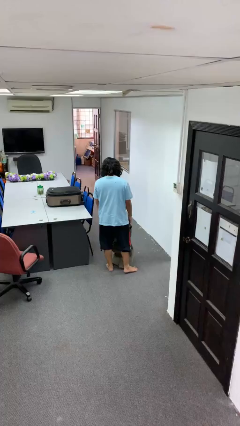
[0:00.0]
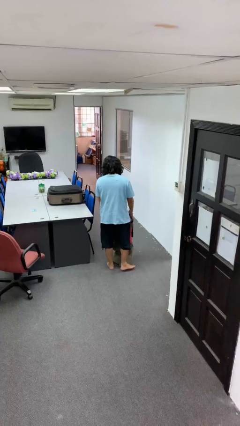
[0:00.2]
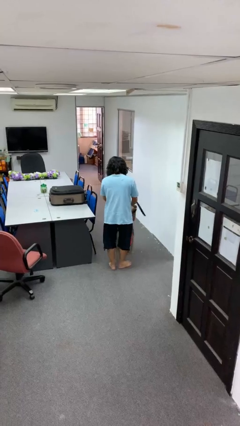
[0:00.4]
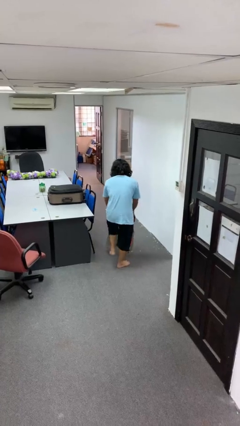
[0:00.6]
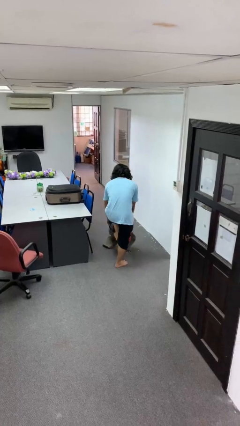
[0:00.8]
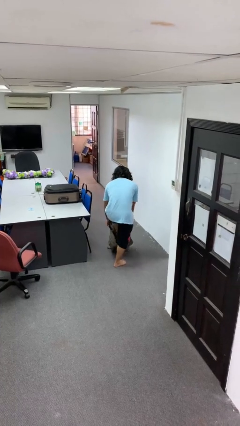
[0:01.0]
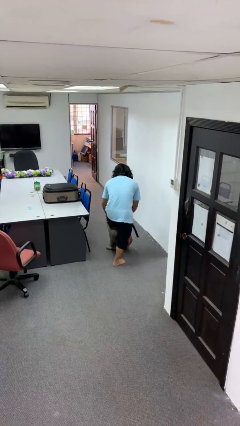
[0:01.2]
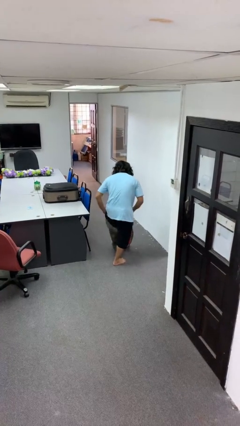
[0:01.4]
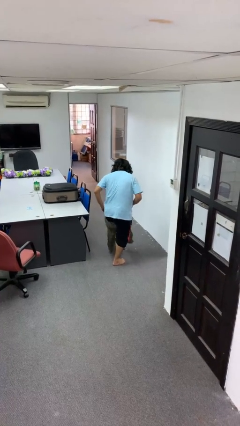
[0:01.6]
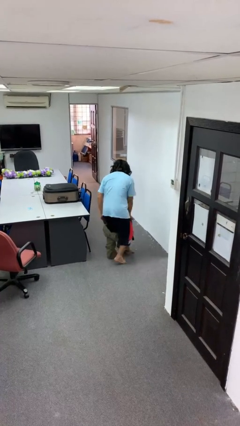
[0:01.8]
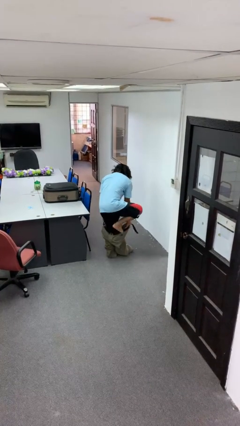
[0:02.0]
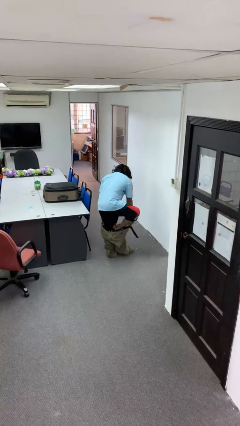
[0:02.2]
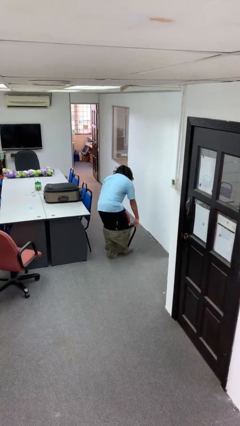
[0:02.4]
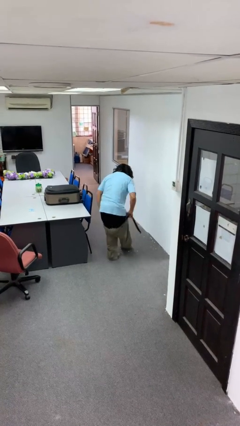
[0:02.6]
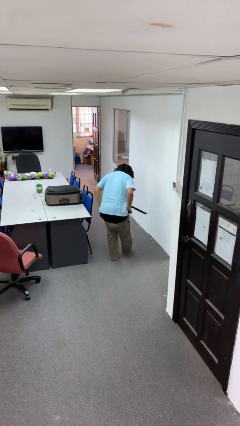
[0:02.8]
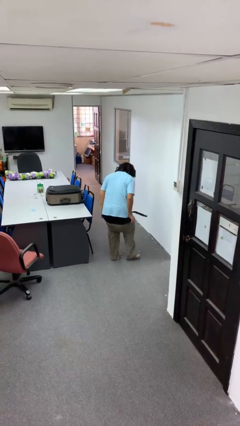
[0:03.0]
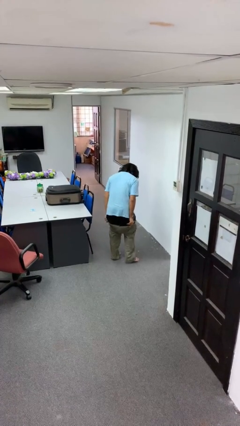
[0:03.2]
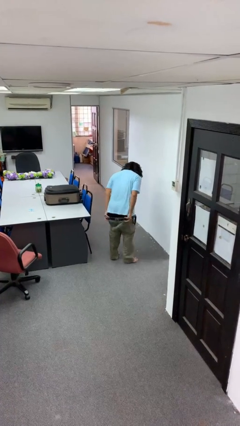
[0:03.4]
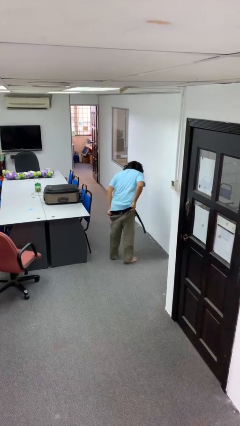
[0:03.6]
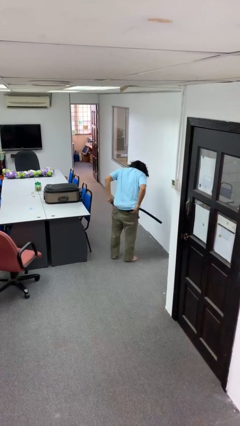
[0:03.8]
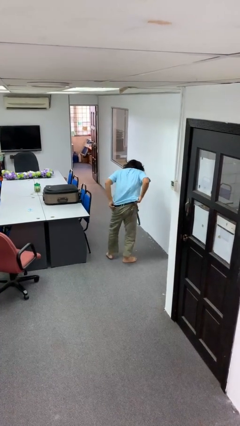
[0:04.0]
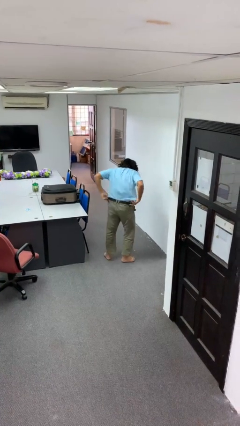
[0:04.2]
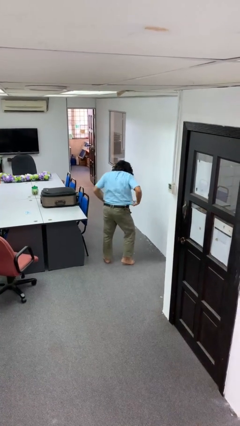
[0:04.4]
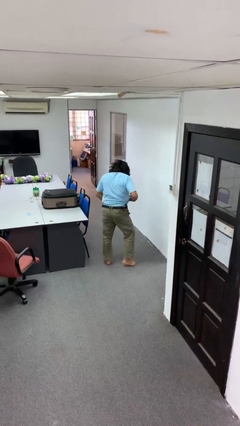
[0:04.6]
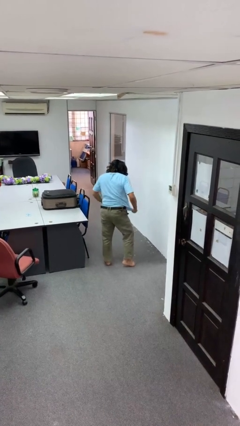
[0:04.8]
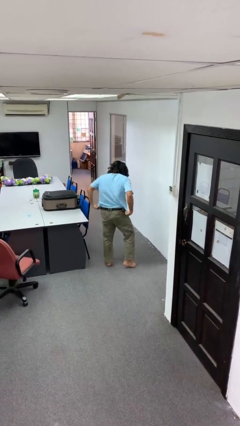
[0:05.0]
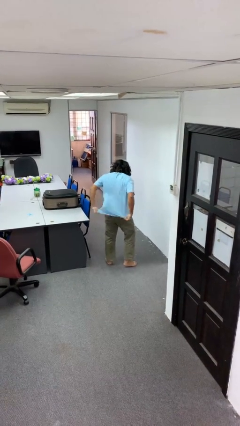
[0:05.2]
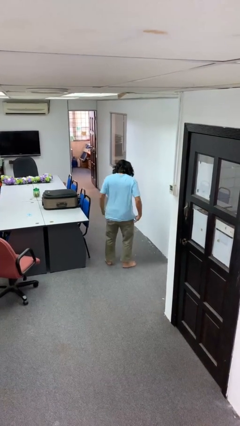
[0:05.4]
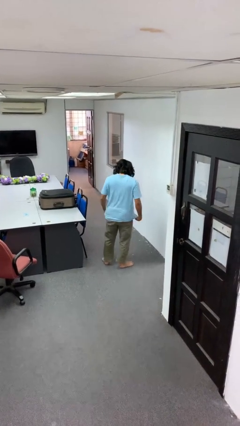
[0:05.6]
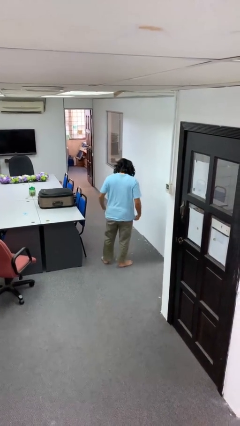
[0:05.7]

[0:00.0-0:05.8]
person takes off pants

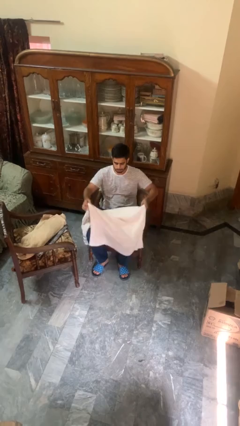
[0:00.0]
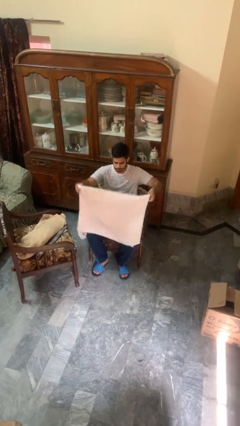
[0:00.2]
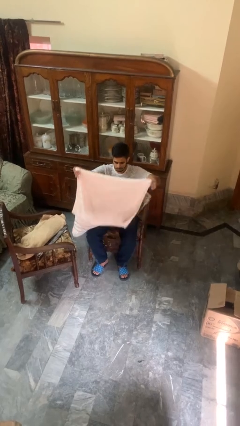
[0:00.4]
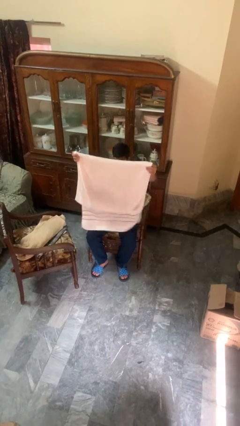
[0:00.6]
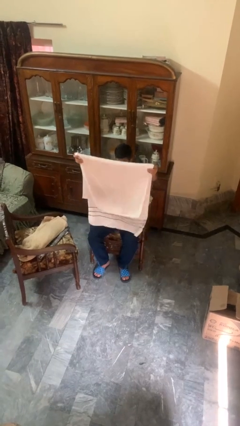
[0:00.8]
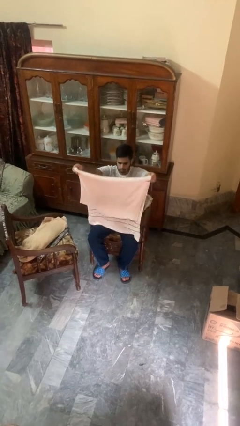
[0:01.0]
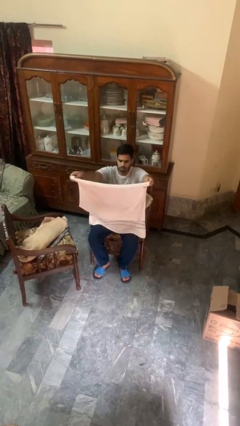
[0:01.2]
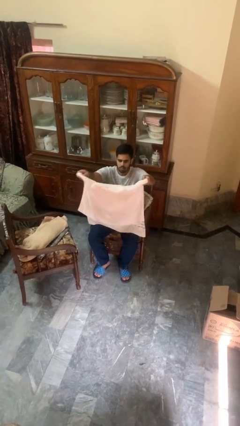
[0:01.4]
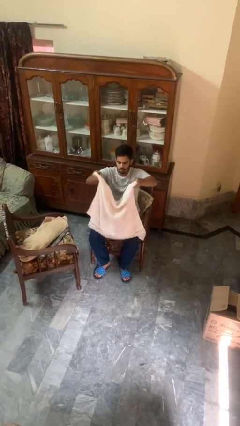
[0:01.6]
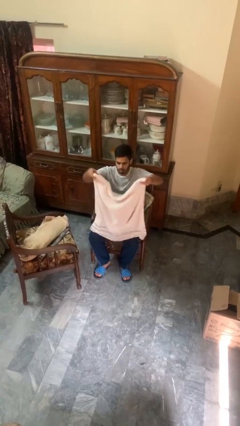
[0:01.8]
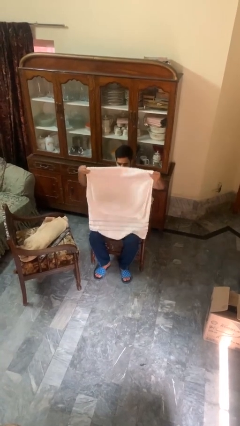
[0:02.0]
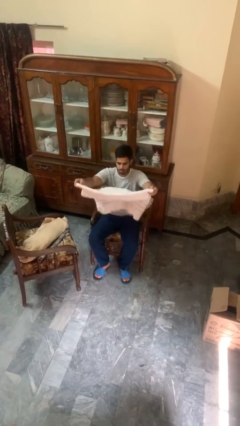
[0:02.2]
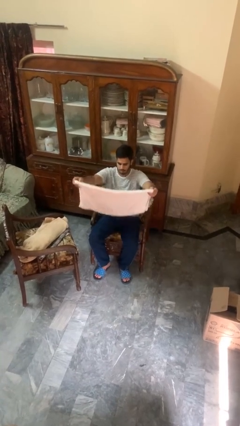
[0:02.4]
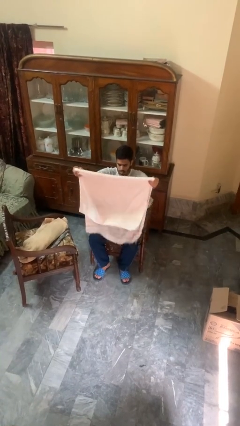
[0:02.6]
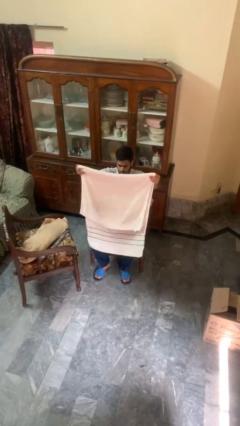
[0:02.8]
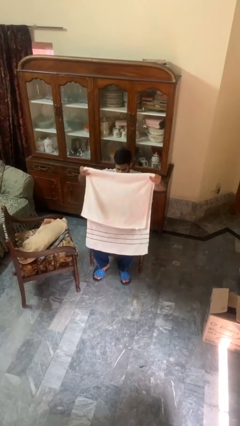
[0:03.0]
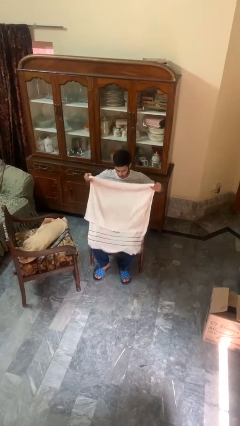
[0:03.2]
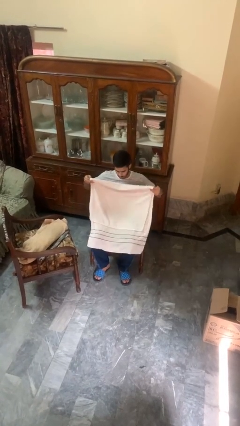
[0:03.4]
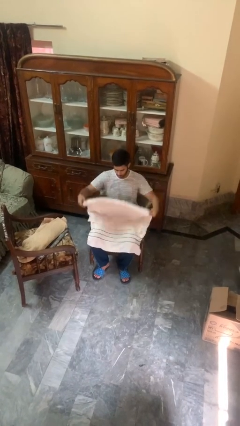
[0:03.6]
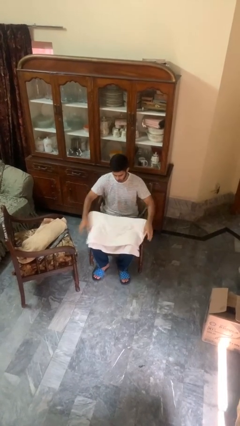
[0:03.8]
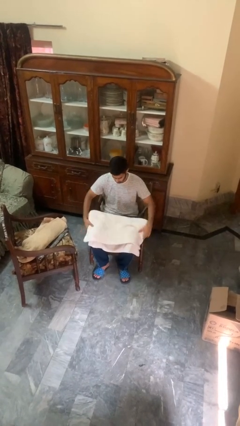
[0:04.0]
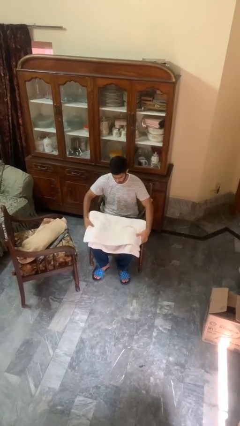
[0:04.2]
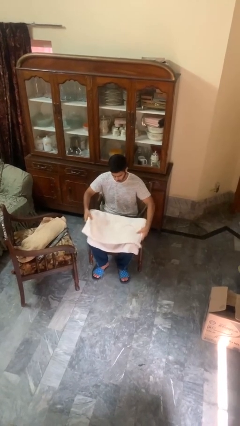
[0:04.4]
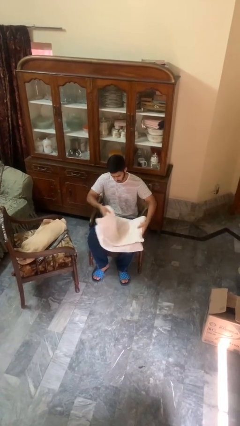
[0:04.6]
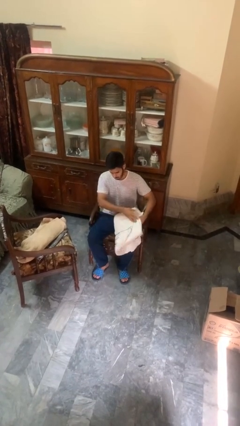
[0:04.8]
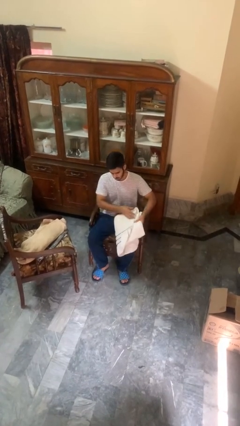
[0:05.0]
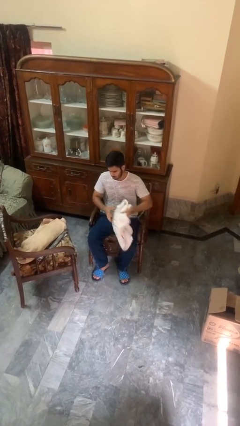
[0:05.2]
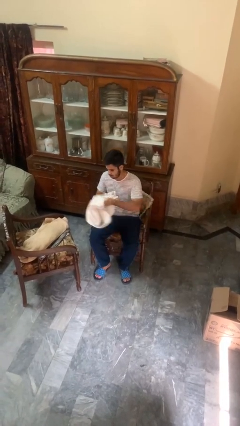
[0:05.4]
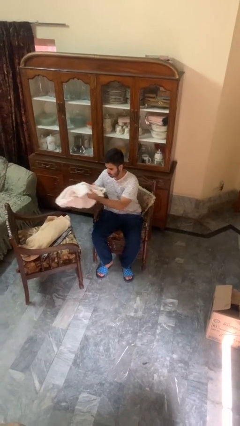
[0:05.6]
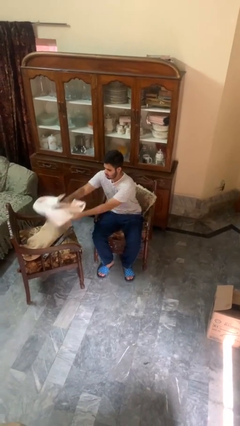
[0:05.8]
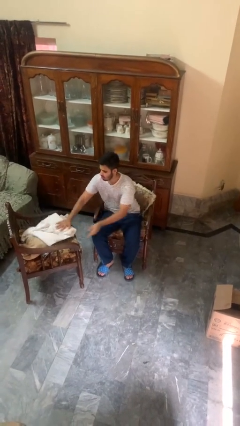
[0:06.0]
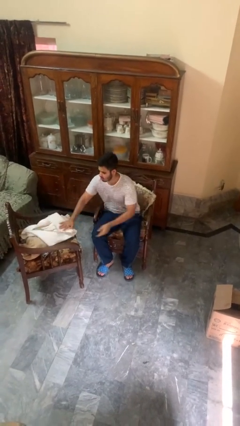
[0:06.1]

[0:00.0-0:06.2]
person folds towel

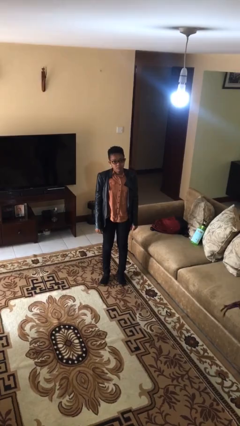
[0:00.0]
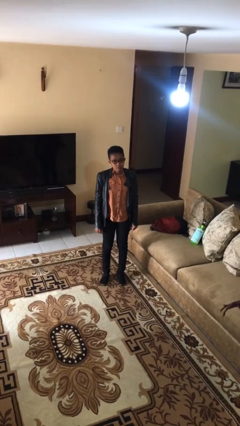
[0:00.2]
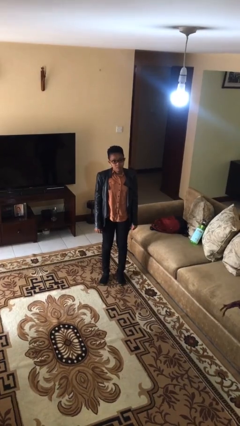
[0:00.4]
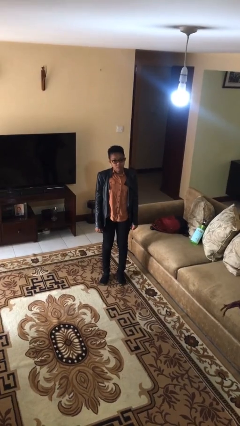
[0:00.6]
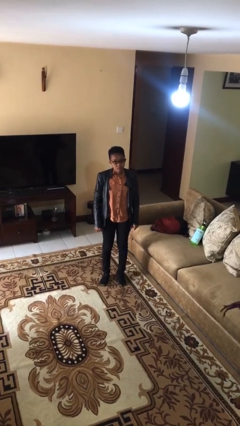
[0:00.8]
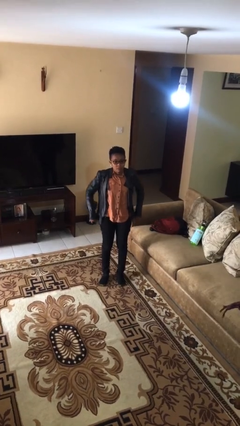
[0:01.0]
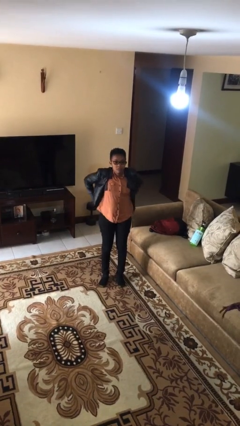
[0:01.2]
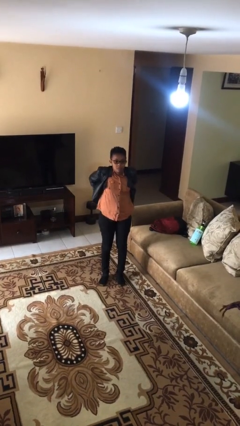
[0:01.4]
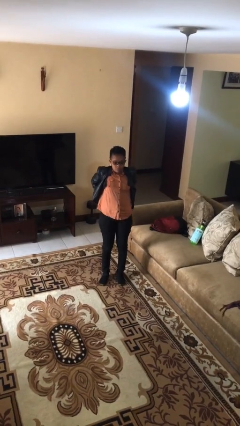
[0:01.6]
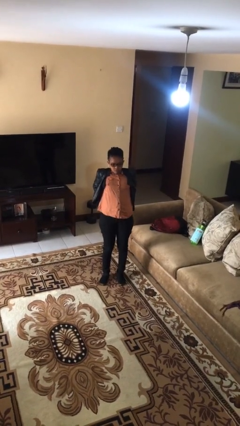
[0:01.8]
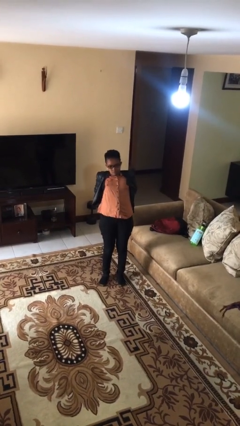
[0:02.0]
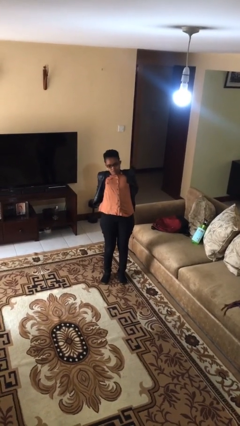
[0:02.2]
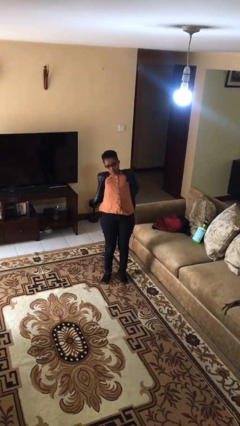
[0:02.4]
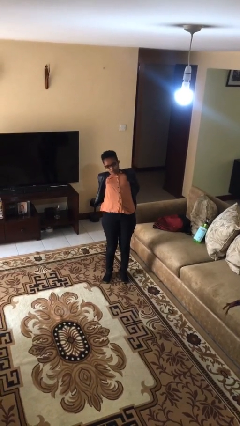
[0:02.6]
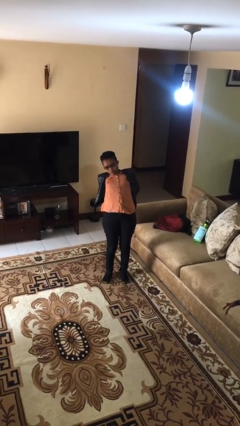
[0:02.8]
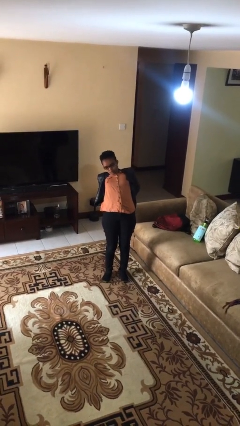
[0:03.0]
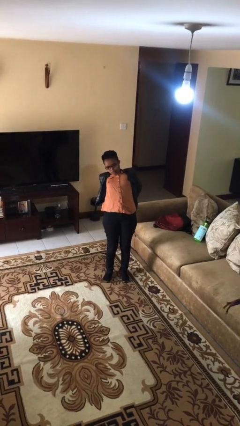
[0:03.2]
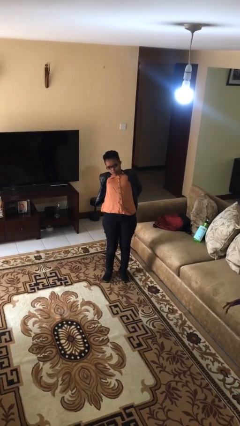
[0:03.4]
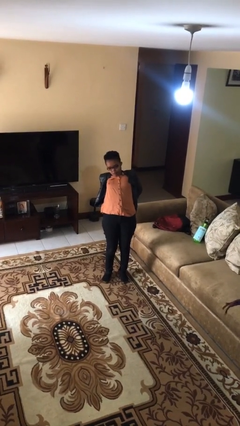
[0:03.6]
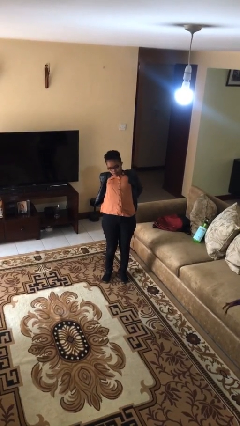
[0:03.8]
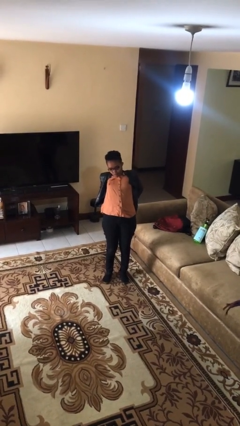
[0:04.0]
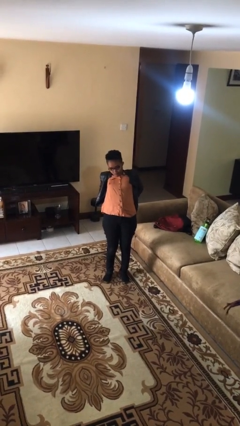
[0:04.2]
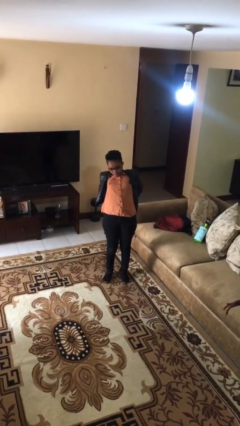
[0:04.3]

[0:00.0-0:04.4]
person stretches back

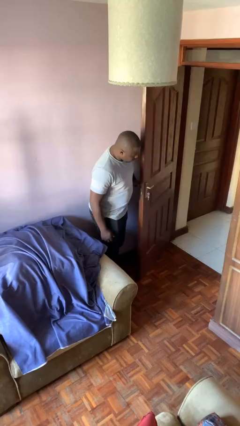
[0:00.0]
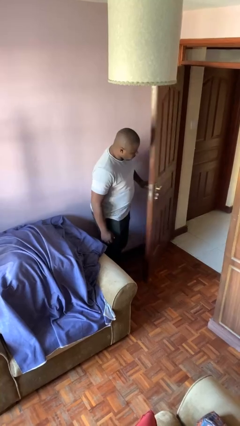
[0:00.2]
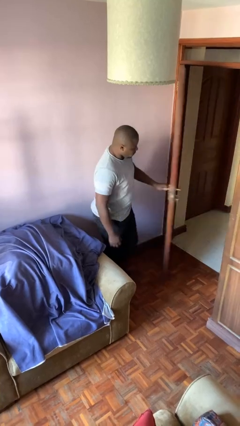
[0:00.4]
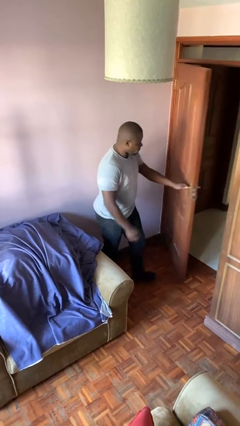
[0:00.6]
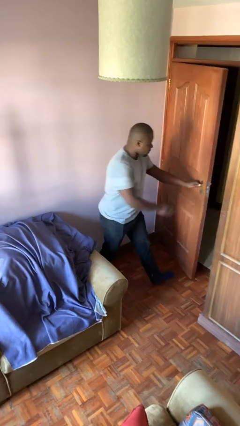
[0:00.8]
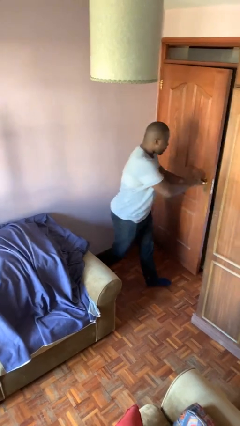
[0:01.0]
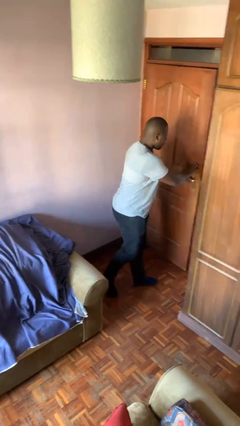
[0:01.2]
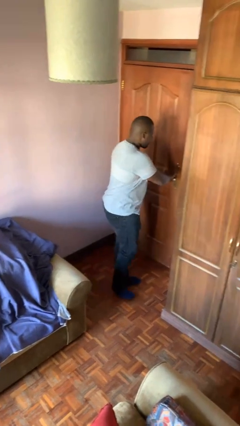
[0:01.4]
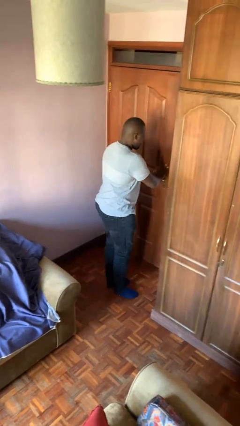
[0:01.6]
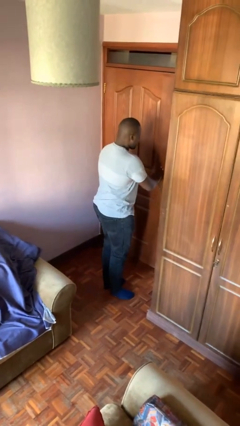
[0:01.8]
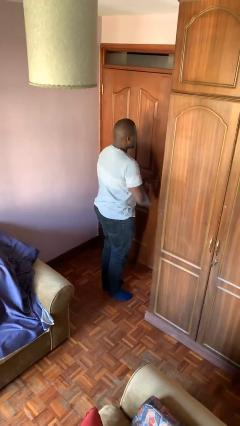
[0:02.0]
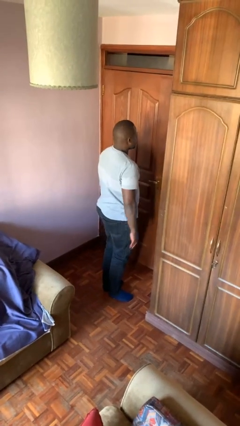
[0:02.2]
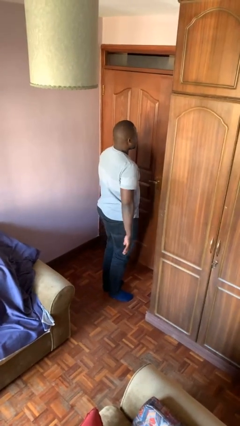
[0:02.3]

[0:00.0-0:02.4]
person closes facility door
